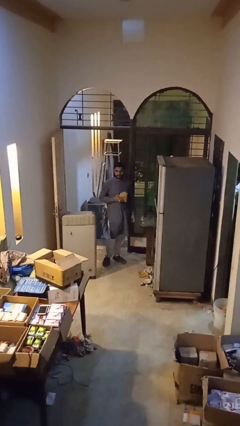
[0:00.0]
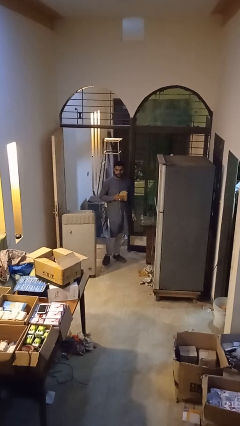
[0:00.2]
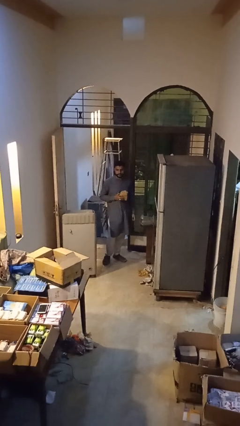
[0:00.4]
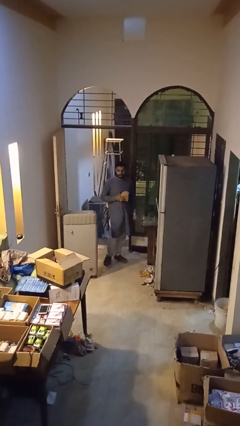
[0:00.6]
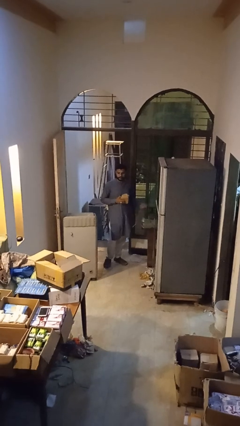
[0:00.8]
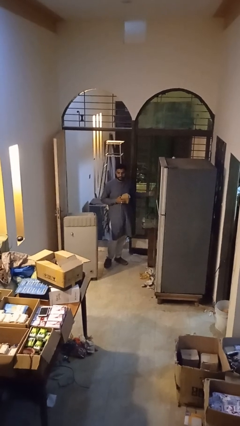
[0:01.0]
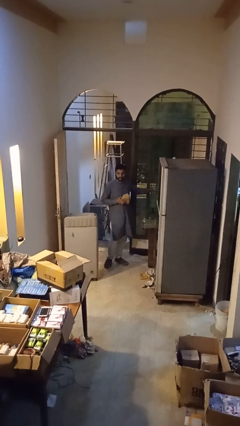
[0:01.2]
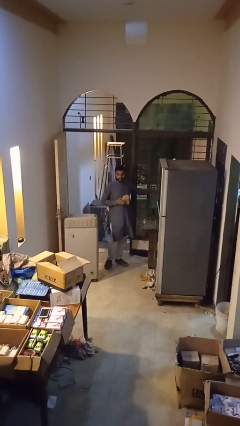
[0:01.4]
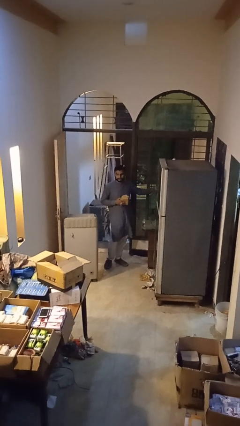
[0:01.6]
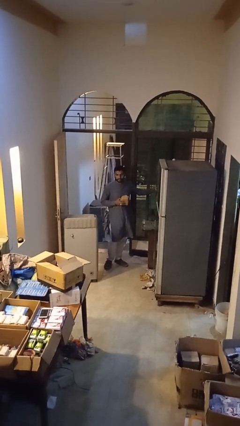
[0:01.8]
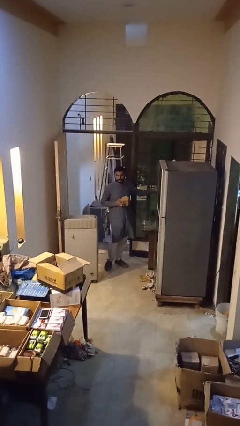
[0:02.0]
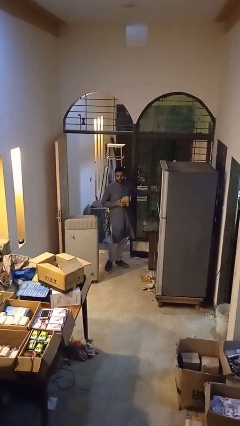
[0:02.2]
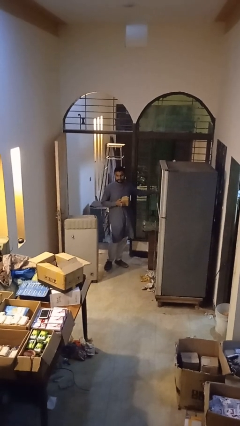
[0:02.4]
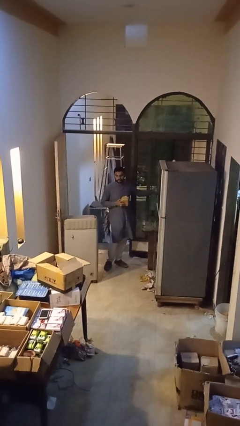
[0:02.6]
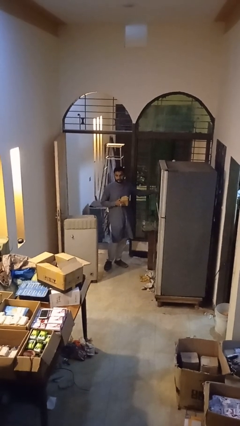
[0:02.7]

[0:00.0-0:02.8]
person plugs into electrical socket

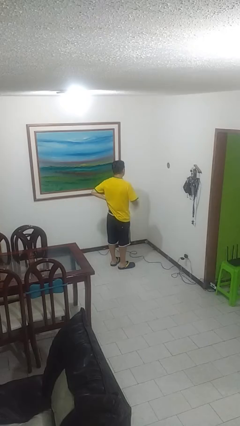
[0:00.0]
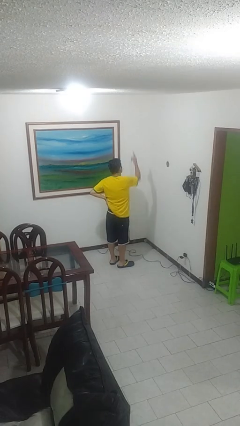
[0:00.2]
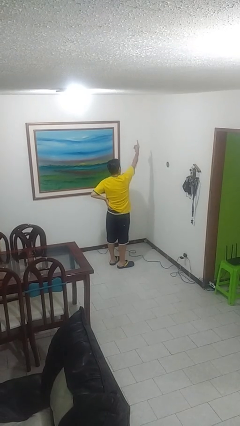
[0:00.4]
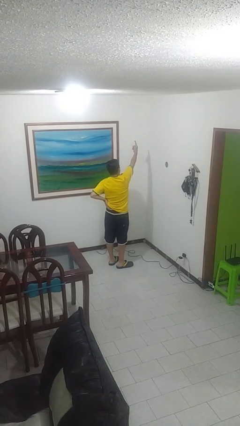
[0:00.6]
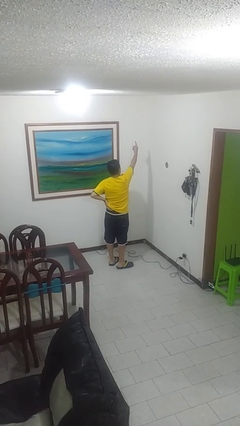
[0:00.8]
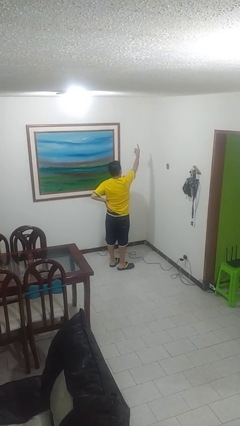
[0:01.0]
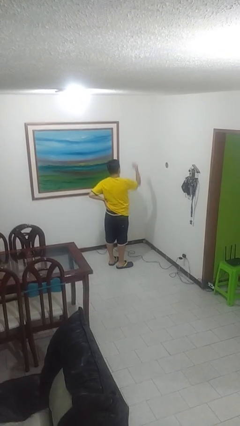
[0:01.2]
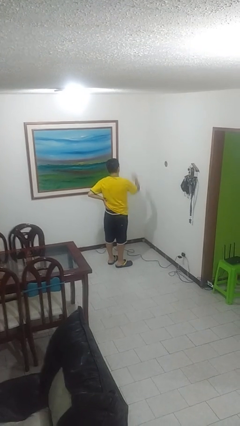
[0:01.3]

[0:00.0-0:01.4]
person gestures number one

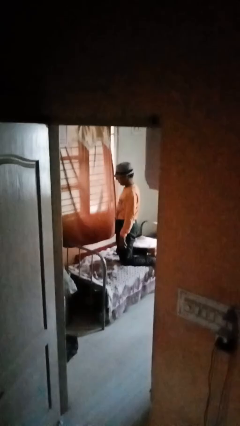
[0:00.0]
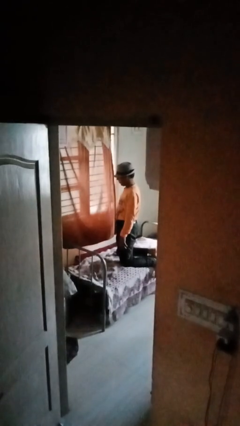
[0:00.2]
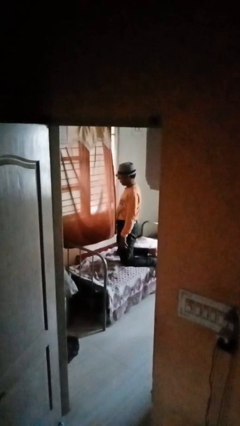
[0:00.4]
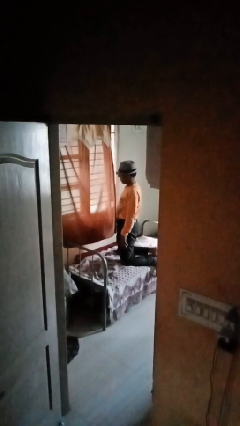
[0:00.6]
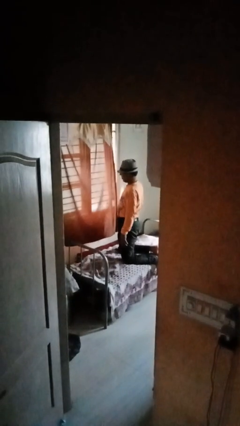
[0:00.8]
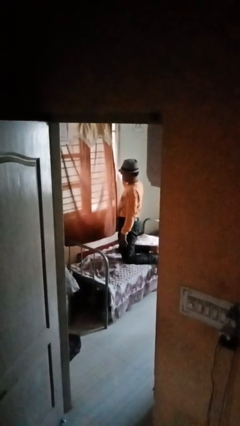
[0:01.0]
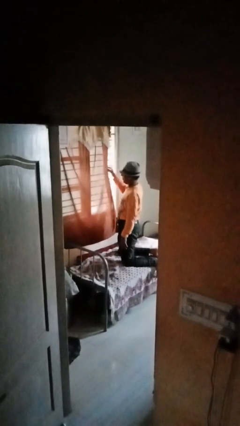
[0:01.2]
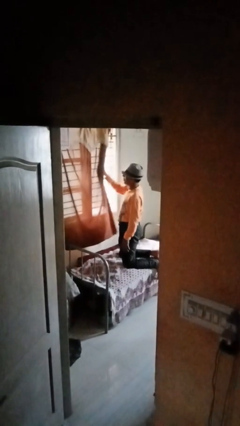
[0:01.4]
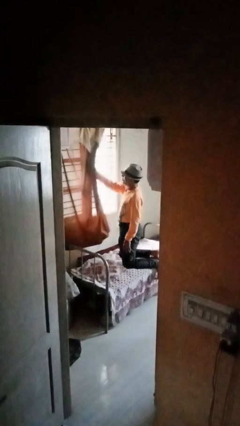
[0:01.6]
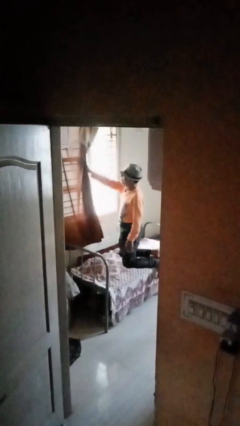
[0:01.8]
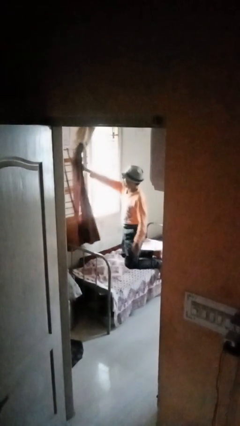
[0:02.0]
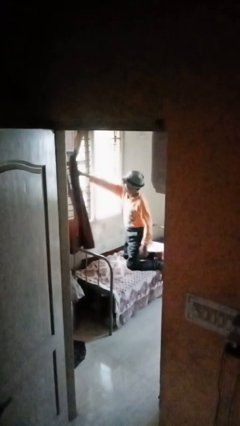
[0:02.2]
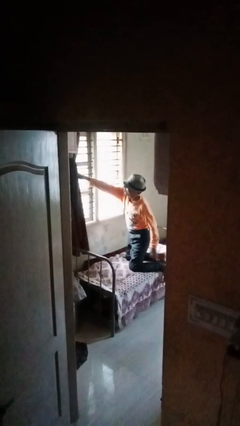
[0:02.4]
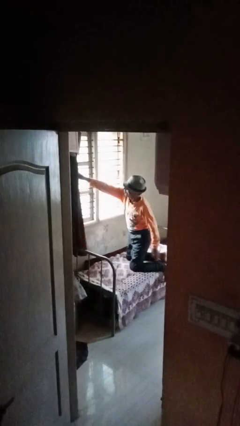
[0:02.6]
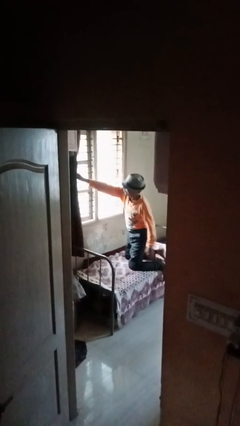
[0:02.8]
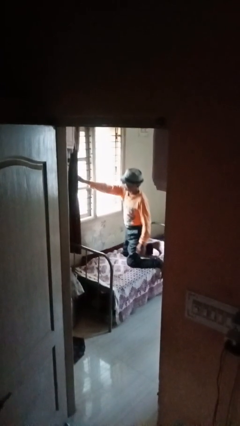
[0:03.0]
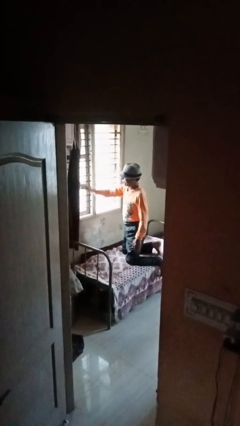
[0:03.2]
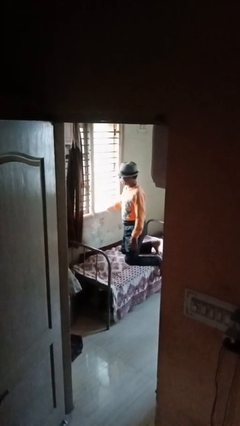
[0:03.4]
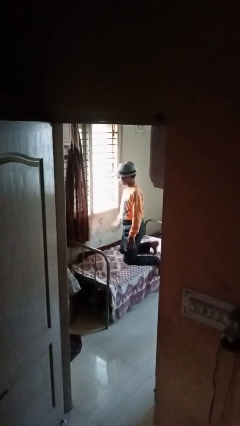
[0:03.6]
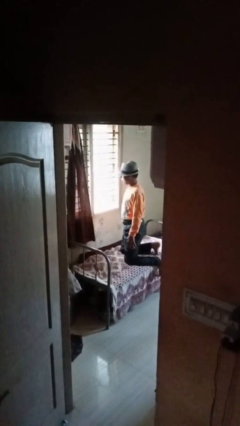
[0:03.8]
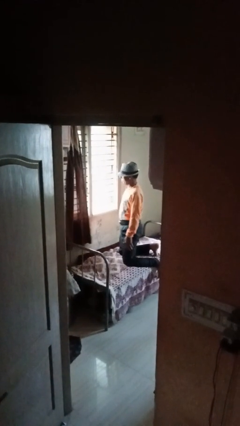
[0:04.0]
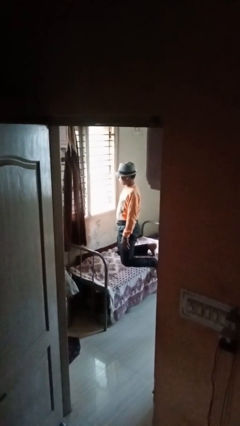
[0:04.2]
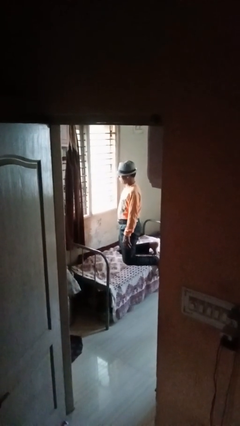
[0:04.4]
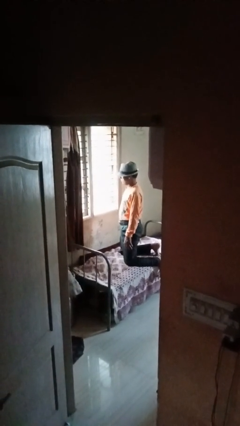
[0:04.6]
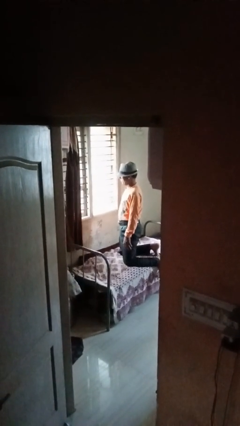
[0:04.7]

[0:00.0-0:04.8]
person opens curtains

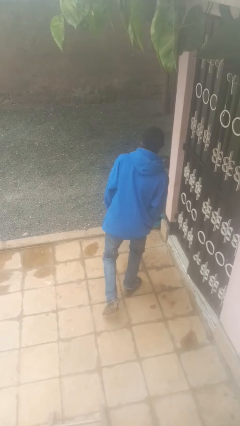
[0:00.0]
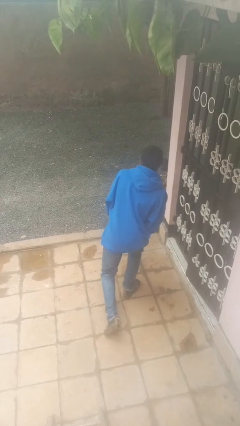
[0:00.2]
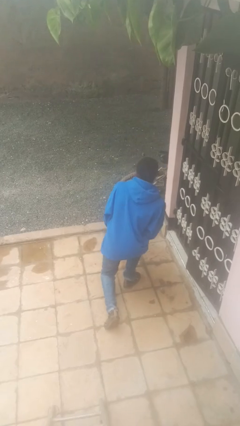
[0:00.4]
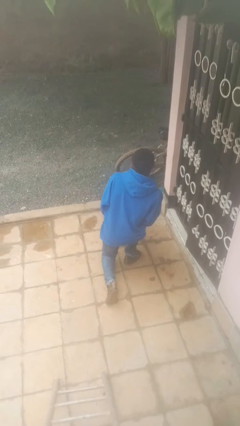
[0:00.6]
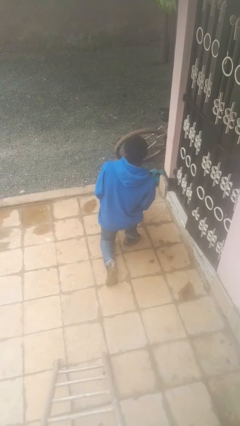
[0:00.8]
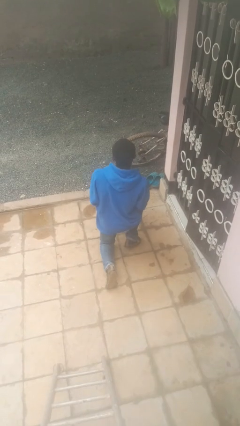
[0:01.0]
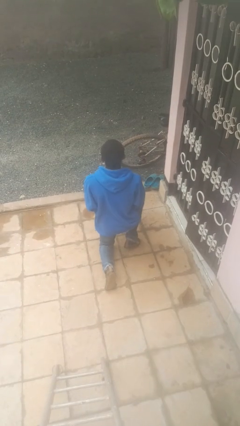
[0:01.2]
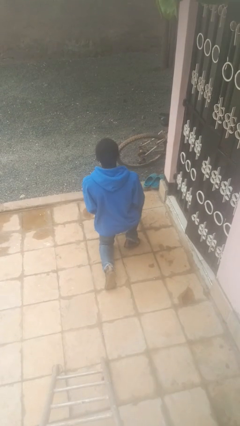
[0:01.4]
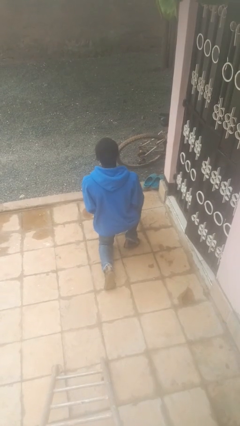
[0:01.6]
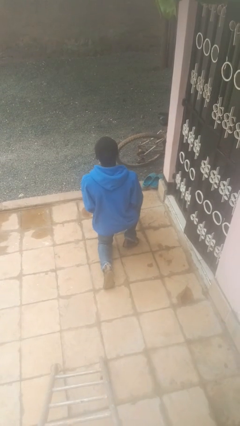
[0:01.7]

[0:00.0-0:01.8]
person kneels

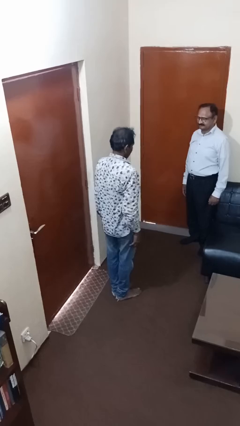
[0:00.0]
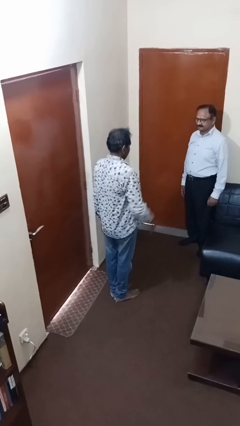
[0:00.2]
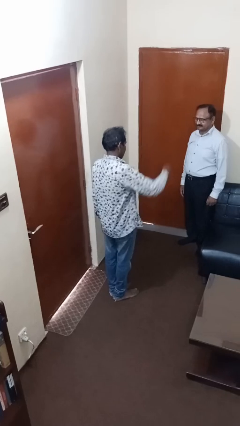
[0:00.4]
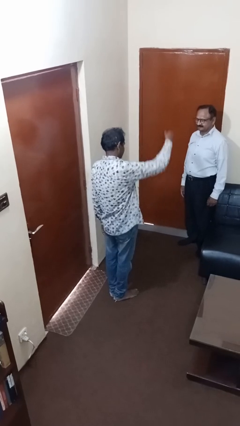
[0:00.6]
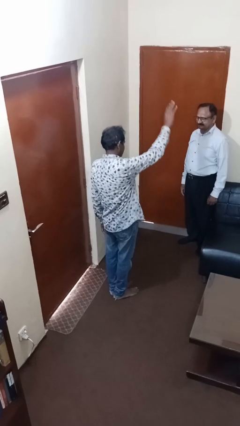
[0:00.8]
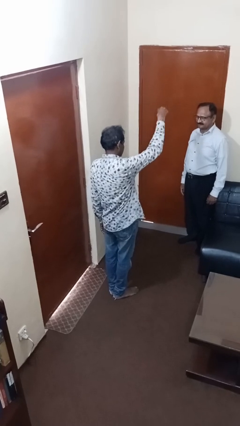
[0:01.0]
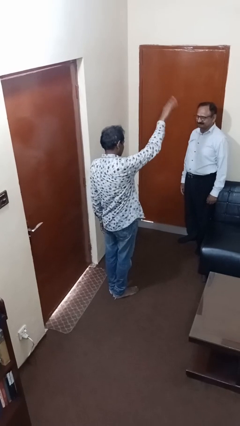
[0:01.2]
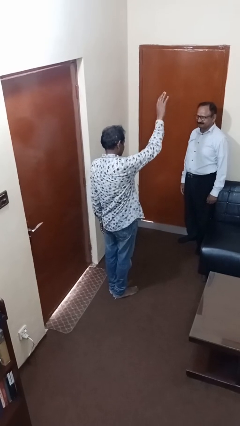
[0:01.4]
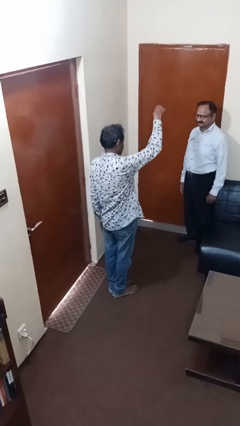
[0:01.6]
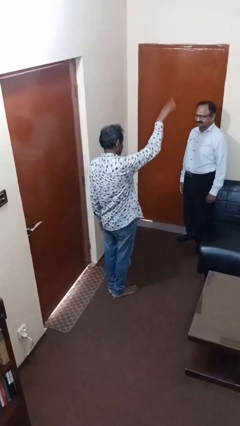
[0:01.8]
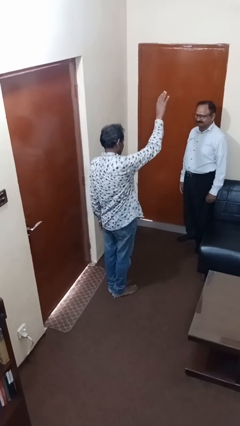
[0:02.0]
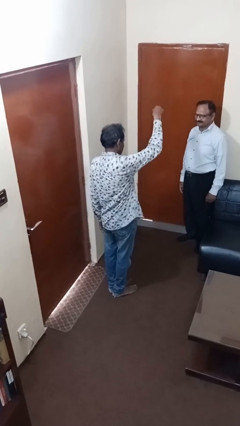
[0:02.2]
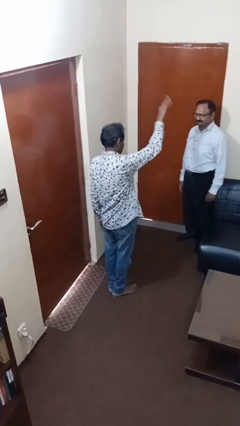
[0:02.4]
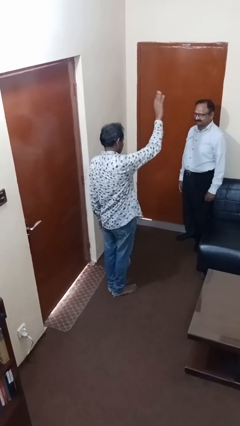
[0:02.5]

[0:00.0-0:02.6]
person shoves person

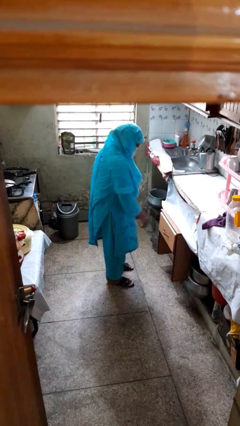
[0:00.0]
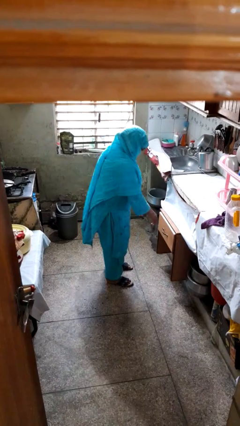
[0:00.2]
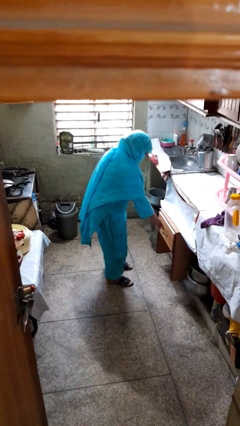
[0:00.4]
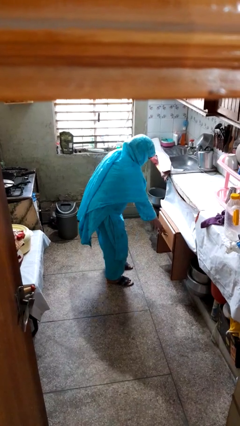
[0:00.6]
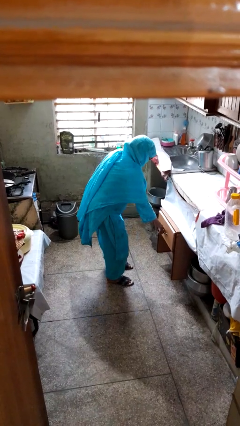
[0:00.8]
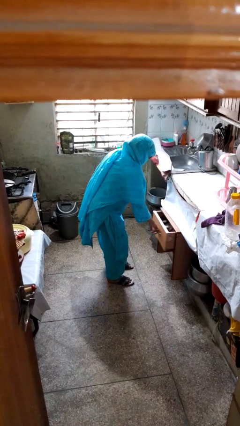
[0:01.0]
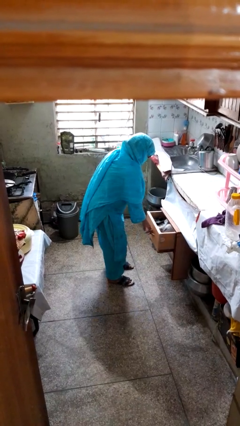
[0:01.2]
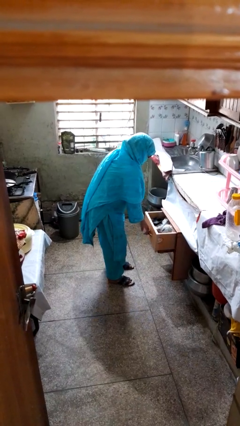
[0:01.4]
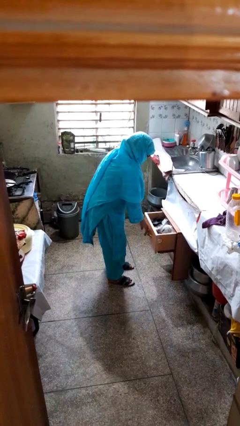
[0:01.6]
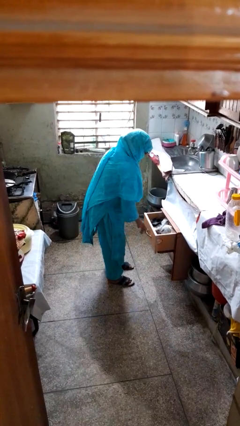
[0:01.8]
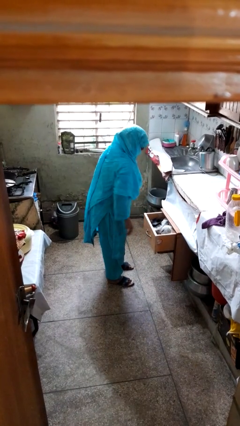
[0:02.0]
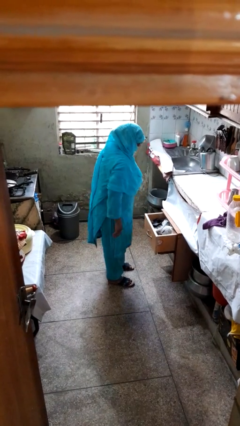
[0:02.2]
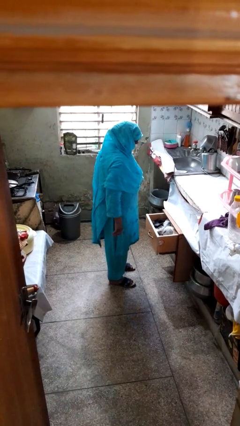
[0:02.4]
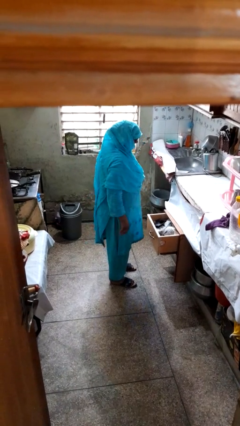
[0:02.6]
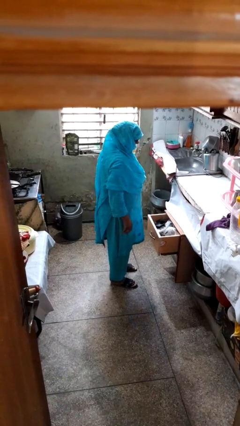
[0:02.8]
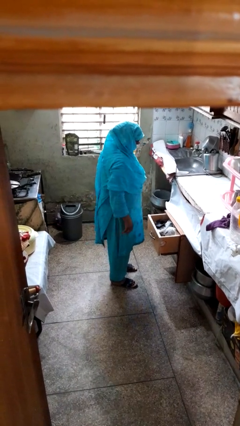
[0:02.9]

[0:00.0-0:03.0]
person opens kitchen drawer

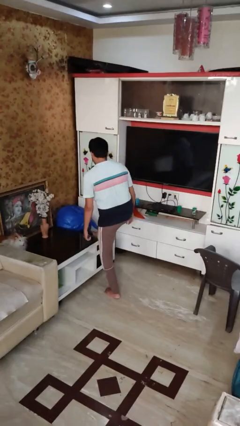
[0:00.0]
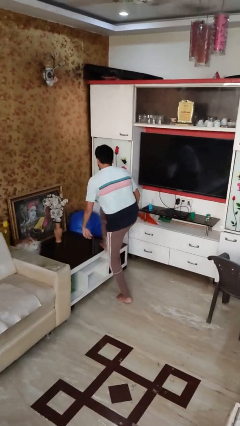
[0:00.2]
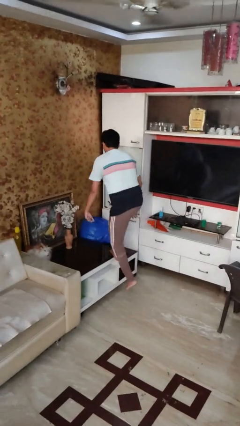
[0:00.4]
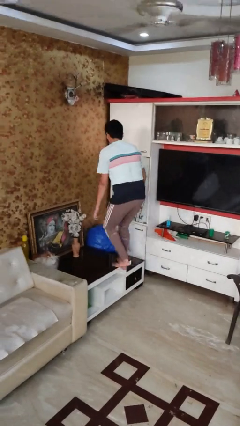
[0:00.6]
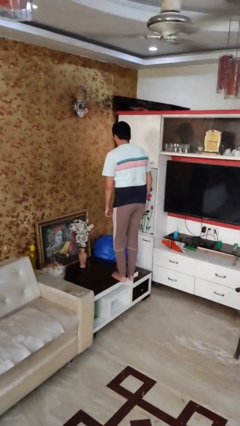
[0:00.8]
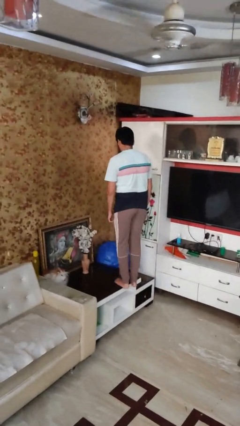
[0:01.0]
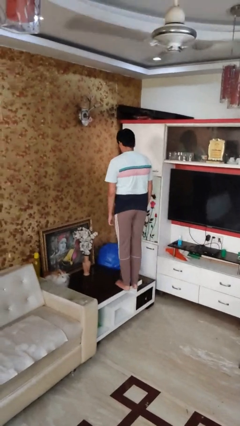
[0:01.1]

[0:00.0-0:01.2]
person climbs on table
